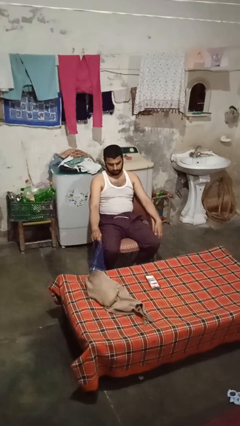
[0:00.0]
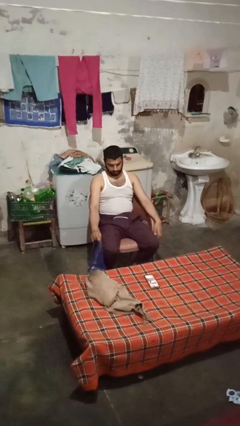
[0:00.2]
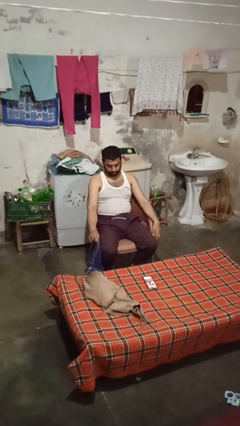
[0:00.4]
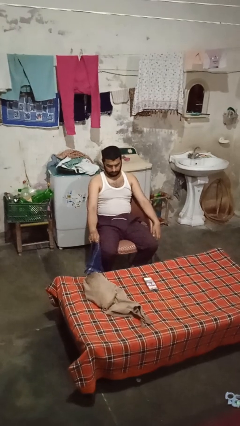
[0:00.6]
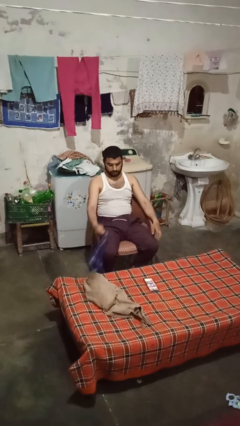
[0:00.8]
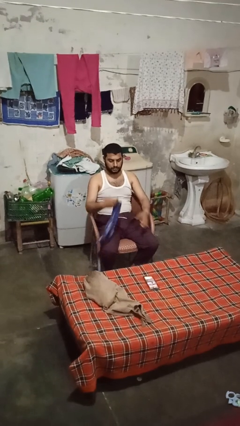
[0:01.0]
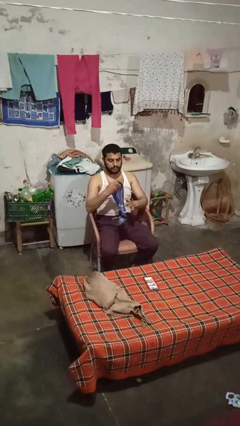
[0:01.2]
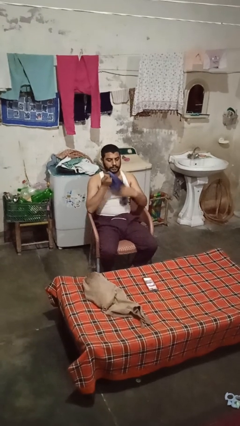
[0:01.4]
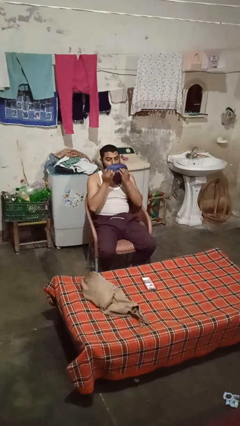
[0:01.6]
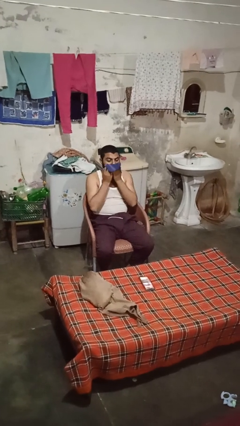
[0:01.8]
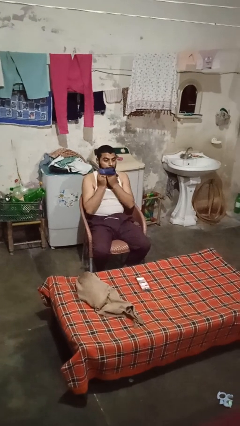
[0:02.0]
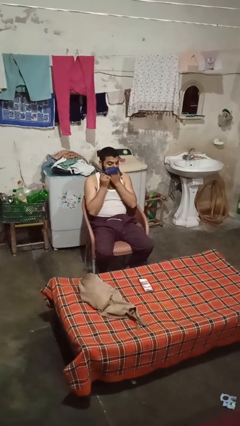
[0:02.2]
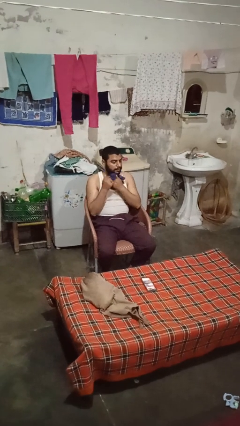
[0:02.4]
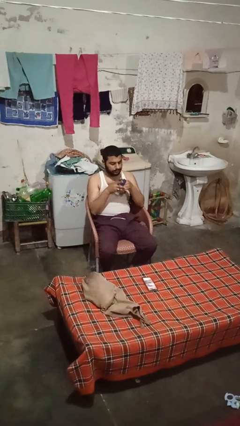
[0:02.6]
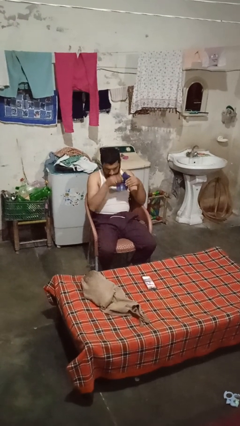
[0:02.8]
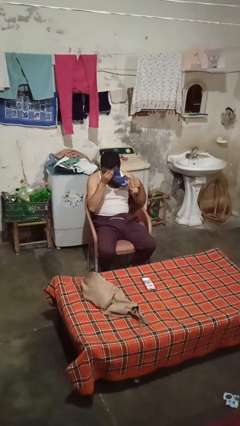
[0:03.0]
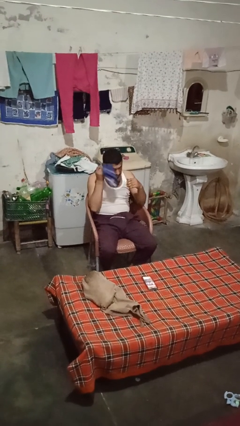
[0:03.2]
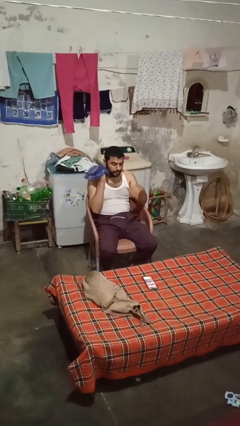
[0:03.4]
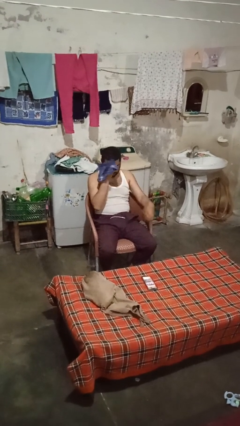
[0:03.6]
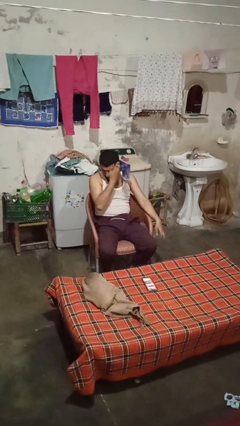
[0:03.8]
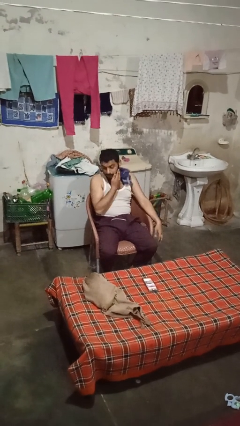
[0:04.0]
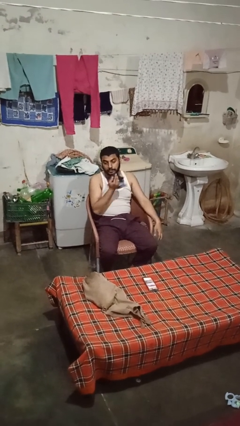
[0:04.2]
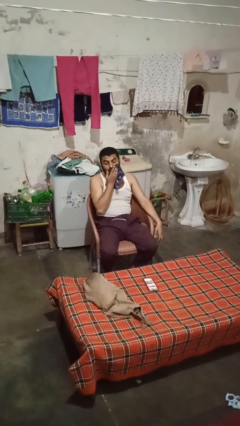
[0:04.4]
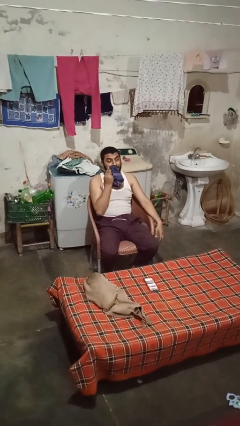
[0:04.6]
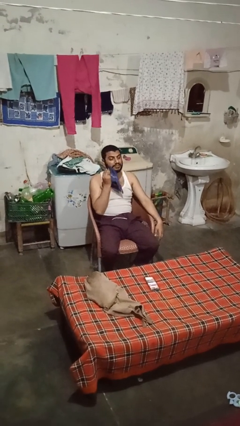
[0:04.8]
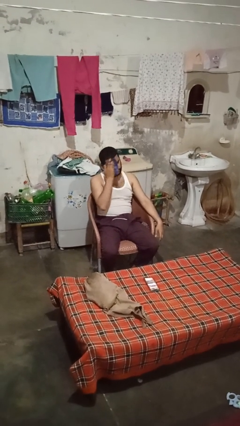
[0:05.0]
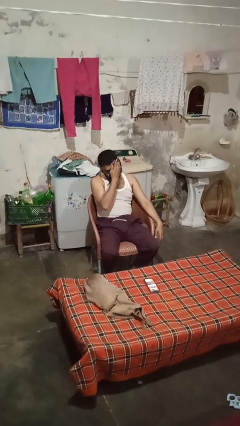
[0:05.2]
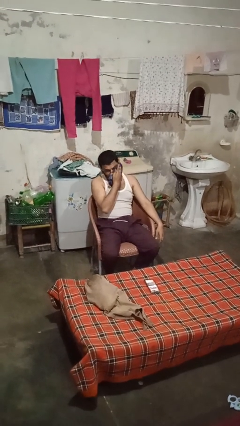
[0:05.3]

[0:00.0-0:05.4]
person wipes mouth with napkin

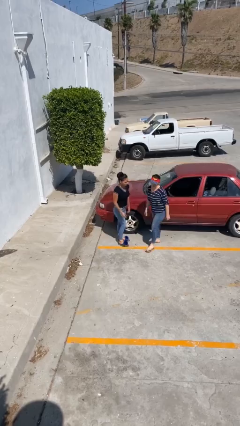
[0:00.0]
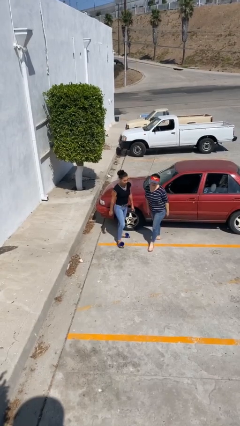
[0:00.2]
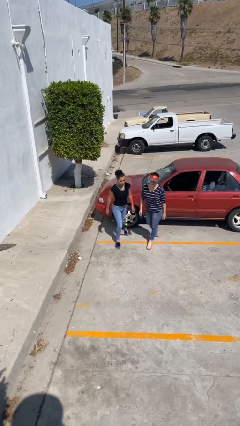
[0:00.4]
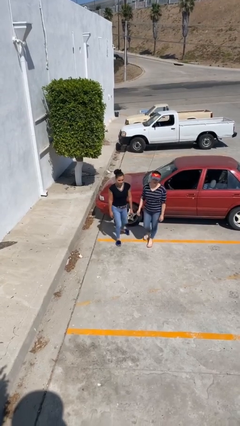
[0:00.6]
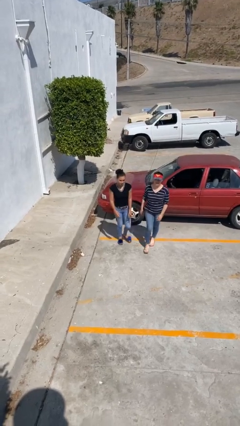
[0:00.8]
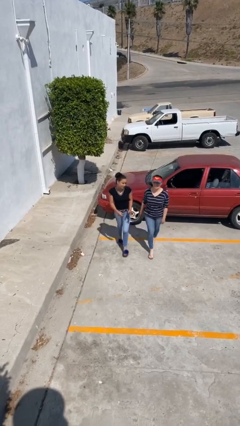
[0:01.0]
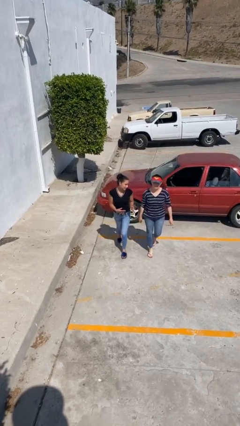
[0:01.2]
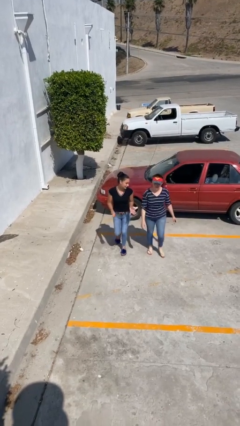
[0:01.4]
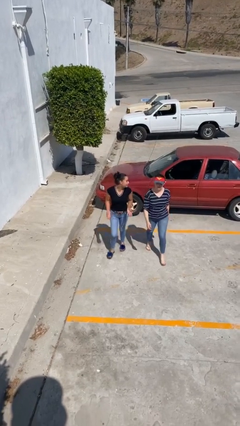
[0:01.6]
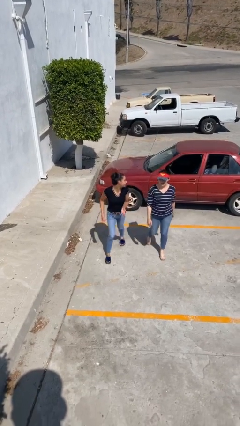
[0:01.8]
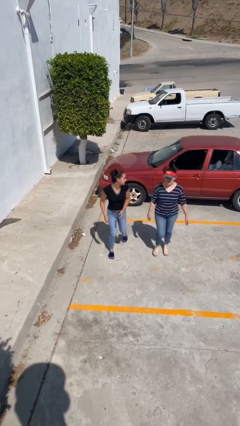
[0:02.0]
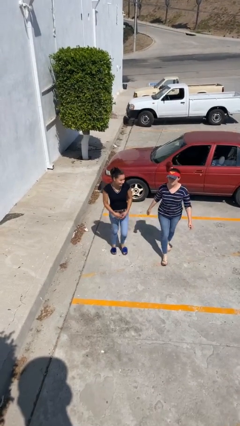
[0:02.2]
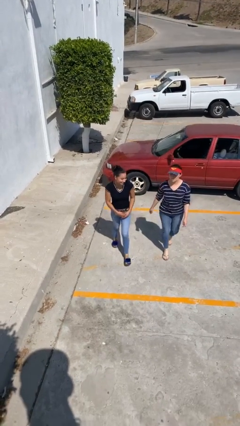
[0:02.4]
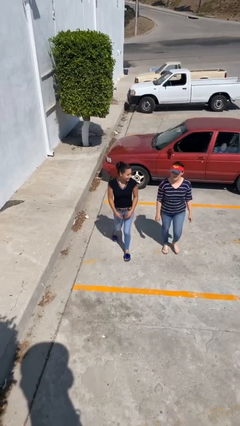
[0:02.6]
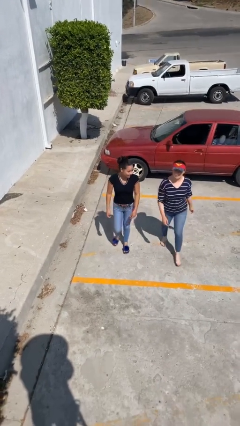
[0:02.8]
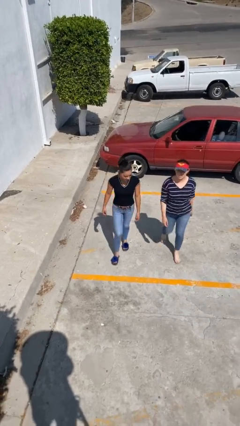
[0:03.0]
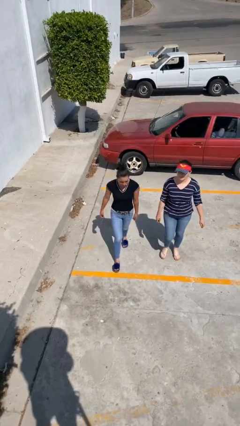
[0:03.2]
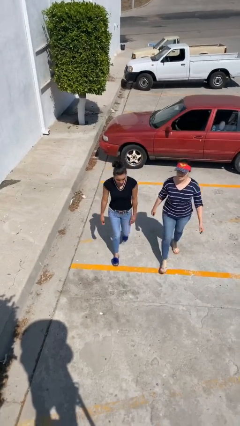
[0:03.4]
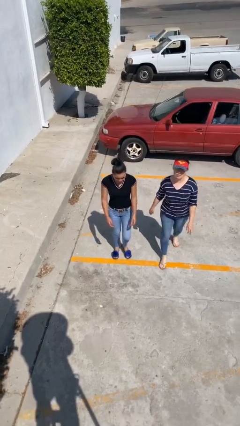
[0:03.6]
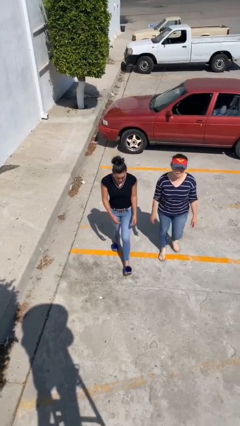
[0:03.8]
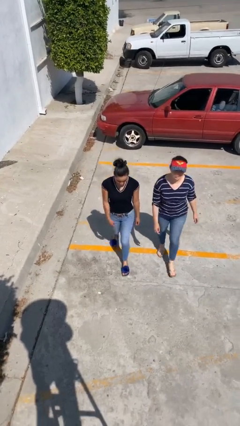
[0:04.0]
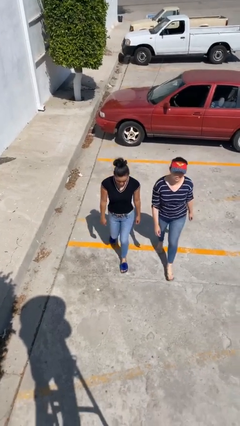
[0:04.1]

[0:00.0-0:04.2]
person talks to person

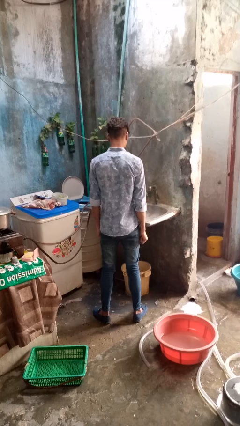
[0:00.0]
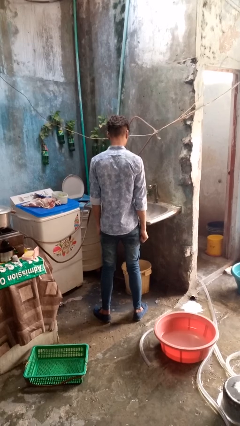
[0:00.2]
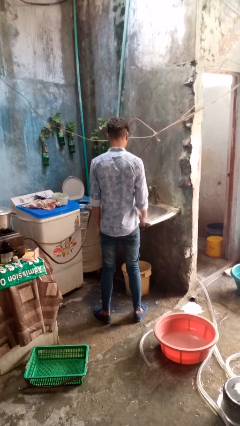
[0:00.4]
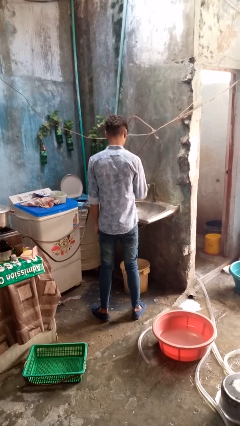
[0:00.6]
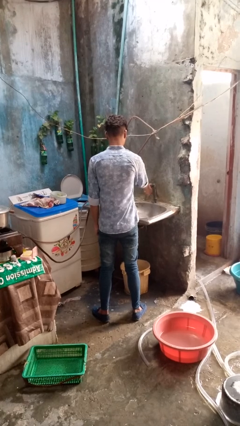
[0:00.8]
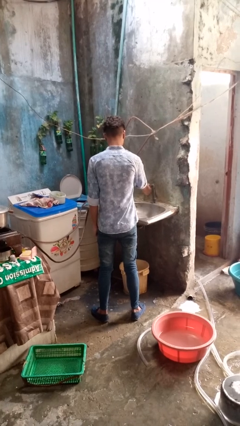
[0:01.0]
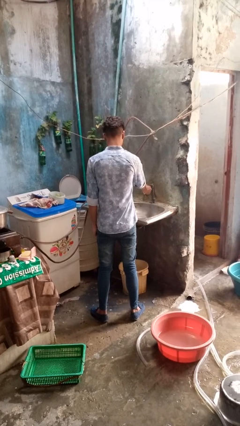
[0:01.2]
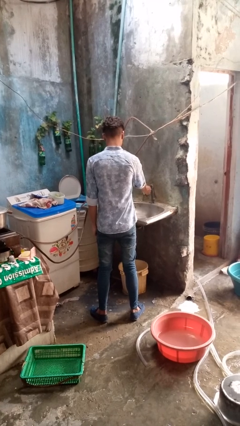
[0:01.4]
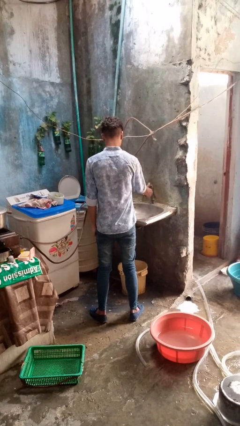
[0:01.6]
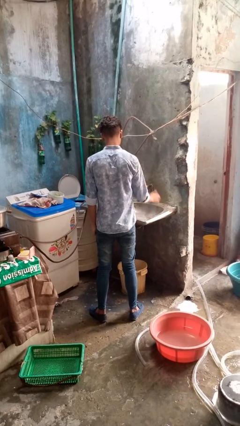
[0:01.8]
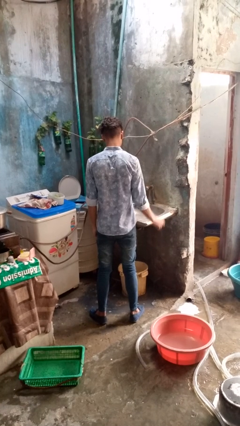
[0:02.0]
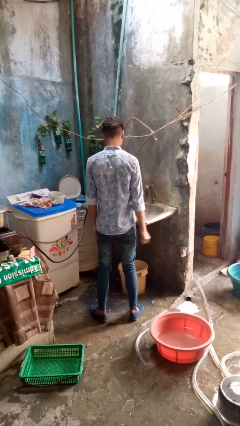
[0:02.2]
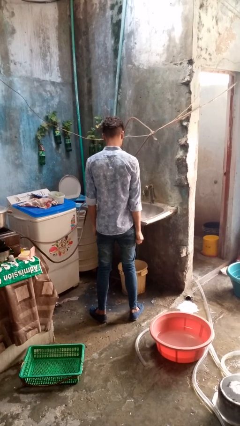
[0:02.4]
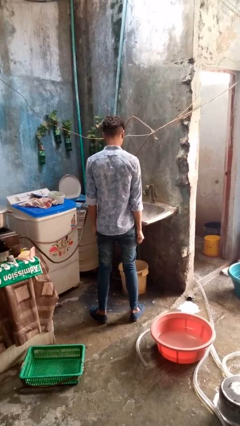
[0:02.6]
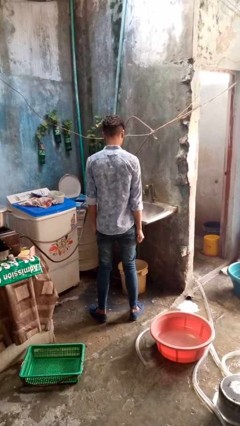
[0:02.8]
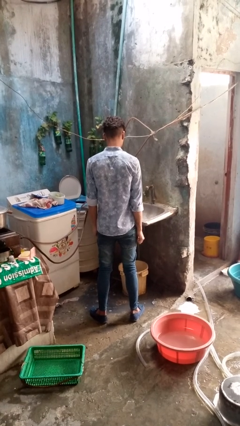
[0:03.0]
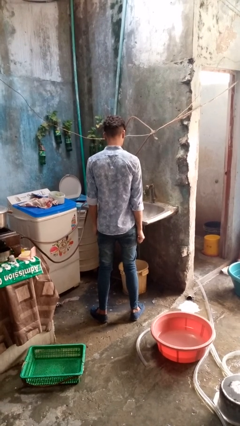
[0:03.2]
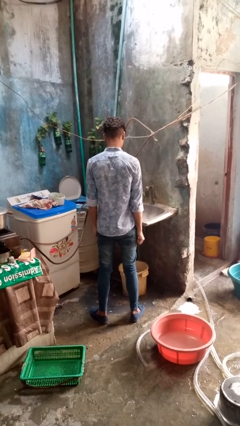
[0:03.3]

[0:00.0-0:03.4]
person turns on faucet

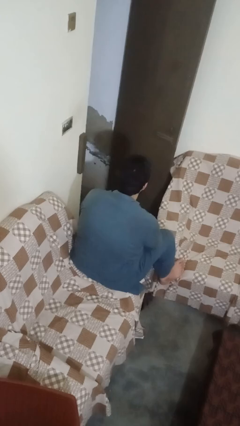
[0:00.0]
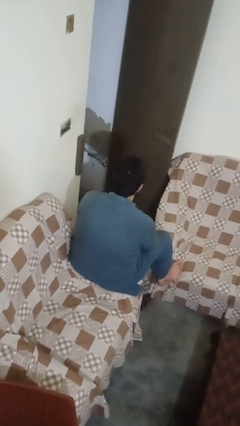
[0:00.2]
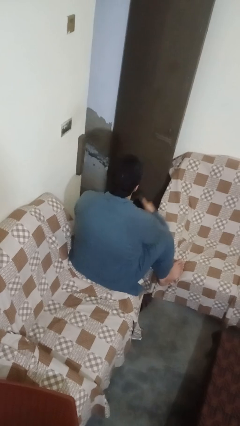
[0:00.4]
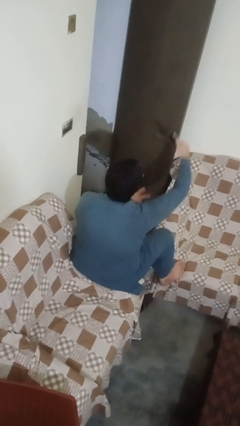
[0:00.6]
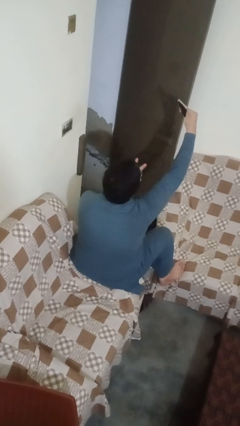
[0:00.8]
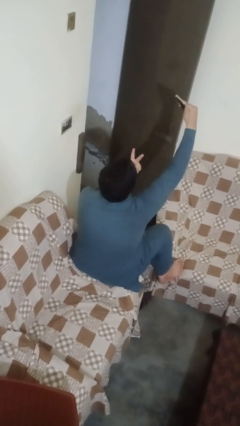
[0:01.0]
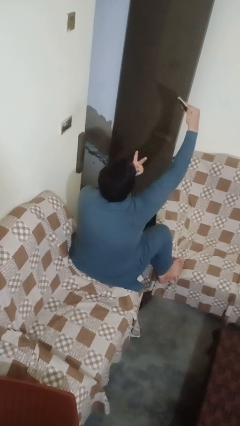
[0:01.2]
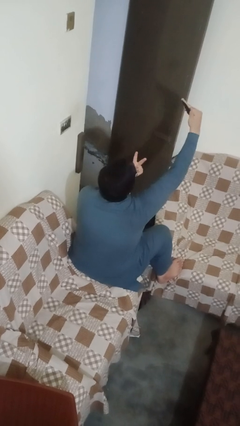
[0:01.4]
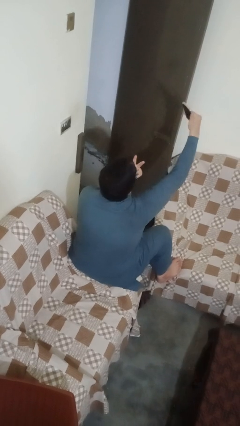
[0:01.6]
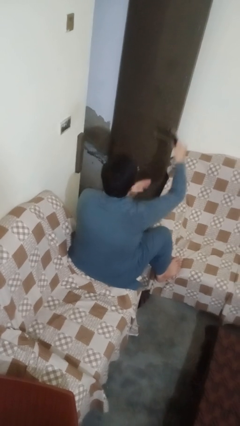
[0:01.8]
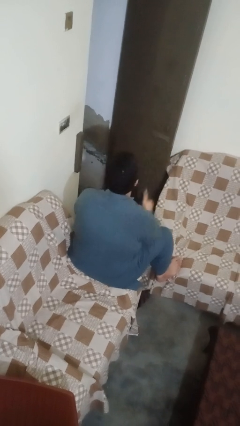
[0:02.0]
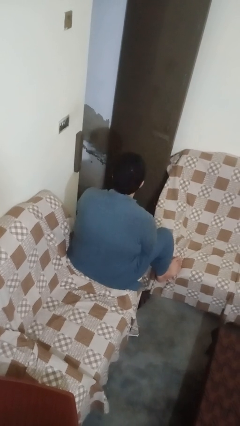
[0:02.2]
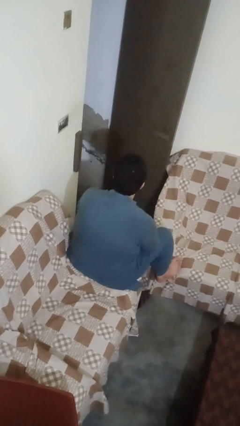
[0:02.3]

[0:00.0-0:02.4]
person takes selfie

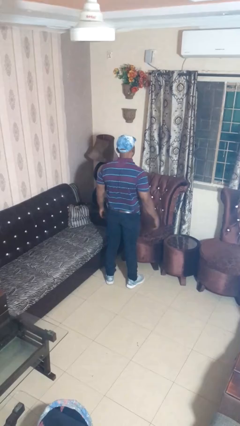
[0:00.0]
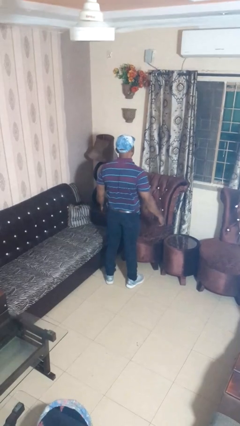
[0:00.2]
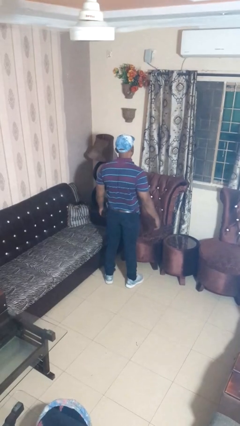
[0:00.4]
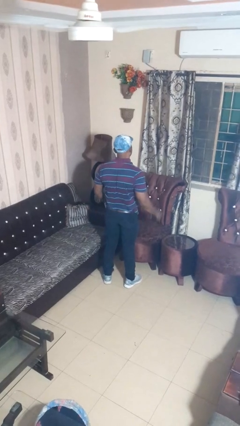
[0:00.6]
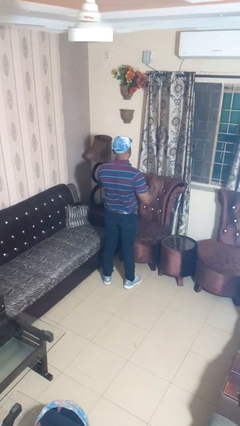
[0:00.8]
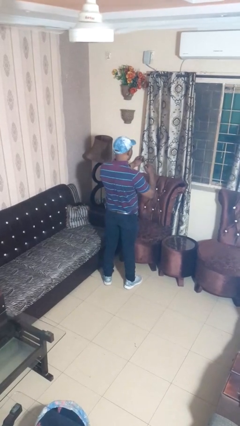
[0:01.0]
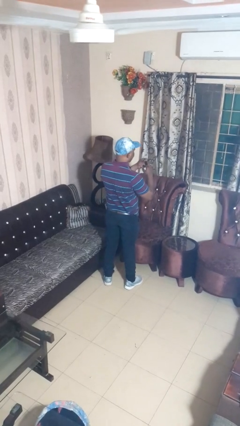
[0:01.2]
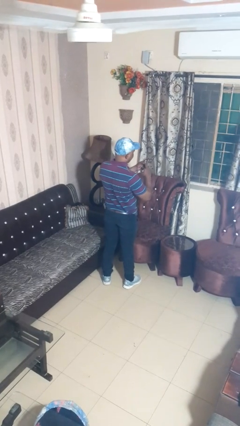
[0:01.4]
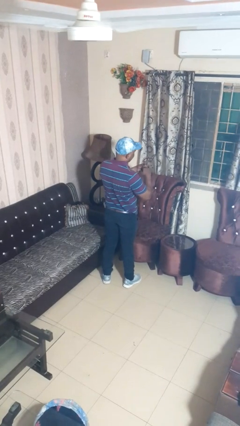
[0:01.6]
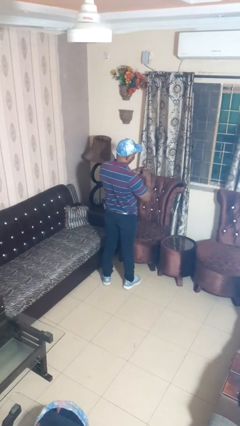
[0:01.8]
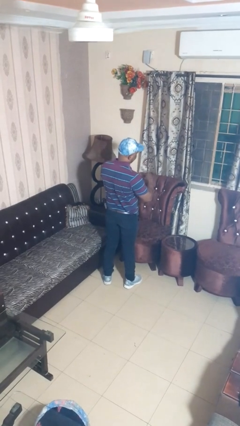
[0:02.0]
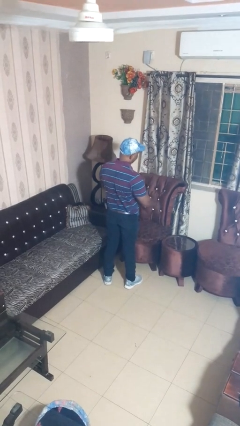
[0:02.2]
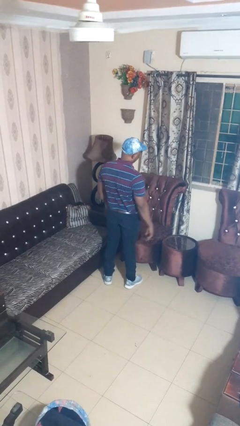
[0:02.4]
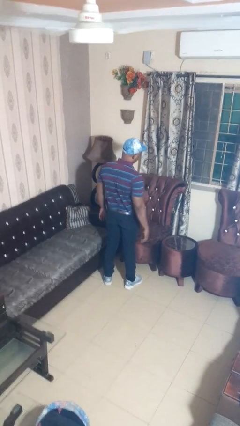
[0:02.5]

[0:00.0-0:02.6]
person puts on ring
